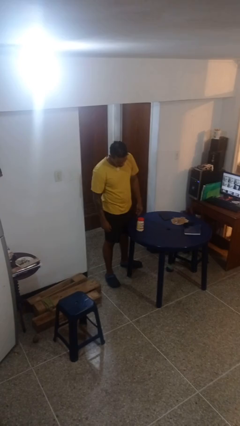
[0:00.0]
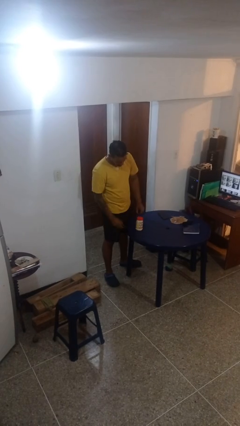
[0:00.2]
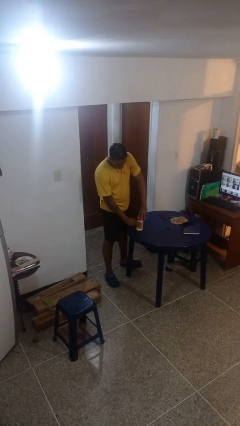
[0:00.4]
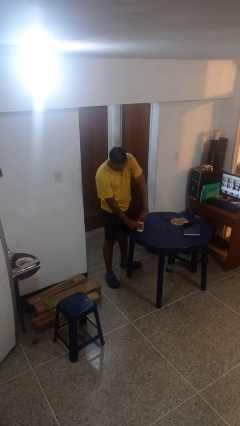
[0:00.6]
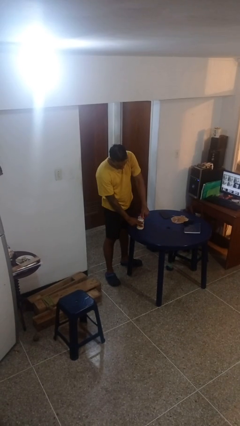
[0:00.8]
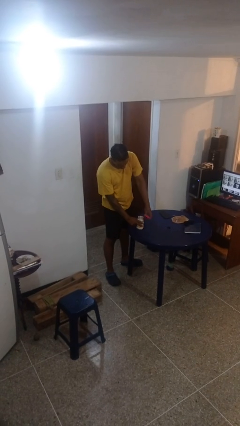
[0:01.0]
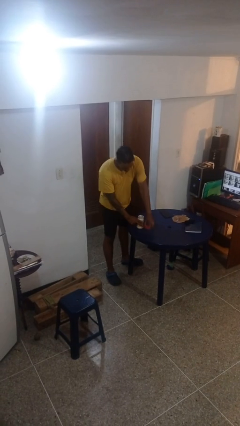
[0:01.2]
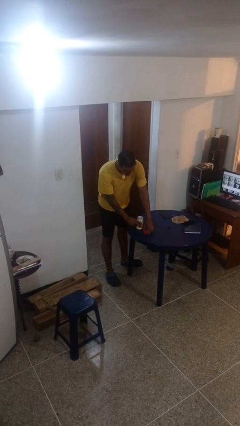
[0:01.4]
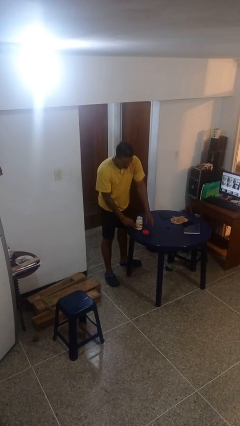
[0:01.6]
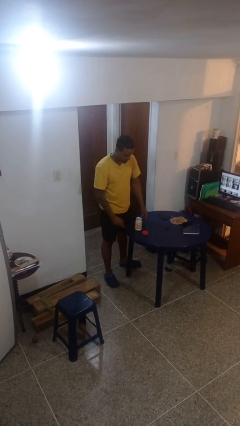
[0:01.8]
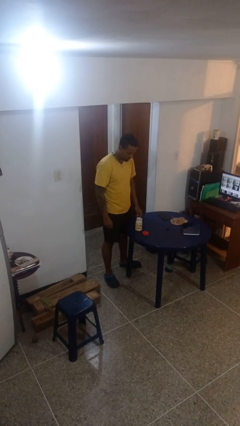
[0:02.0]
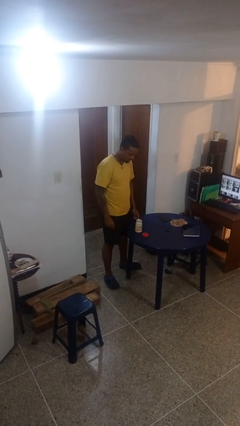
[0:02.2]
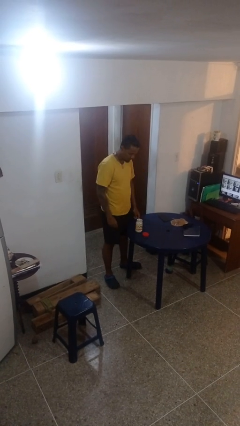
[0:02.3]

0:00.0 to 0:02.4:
person opens jar

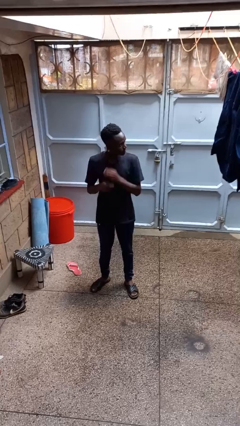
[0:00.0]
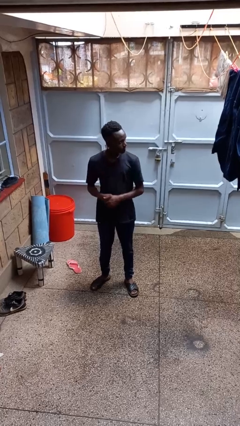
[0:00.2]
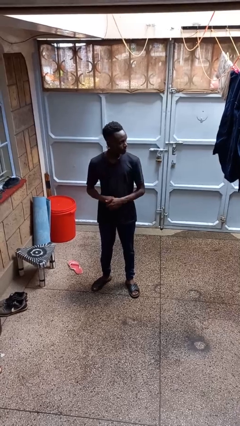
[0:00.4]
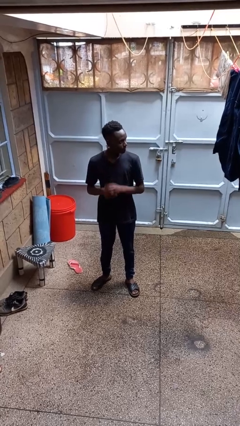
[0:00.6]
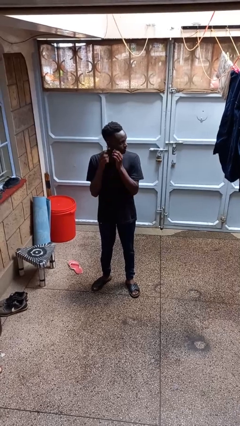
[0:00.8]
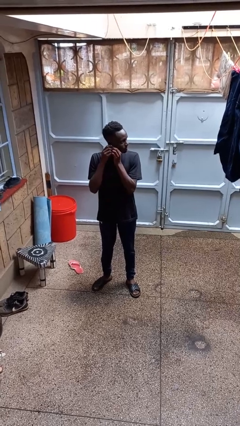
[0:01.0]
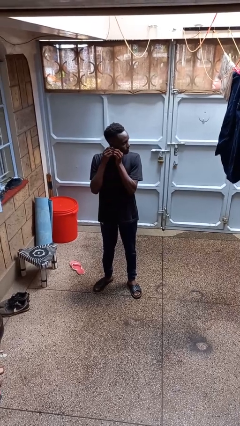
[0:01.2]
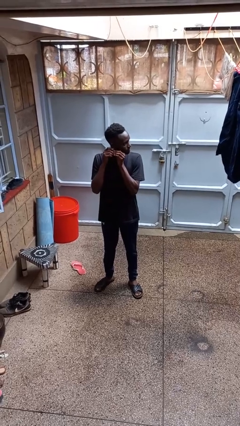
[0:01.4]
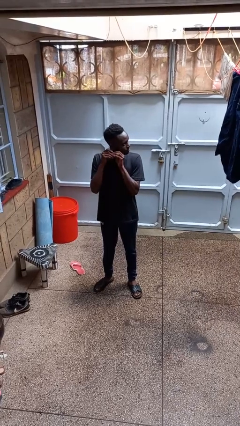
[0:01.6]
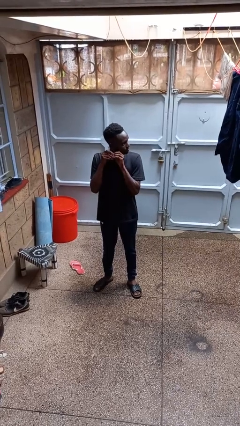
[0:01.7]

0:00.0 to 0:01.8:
person takes off earrings

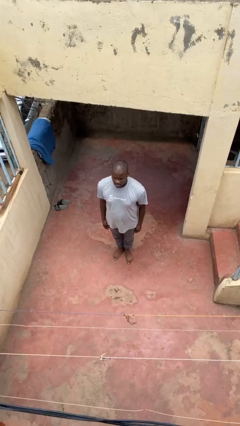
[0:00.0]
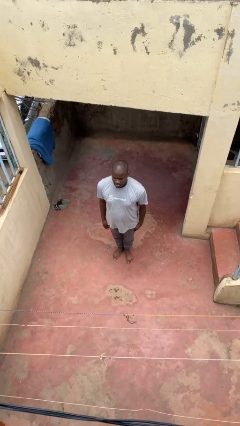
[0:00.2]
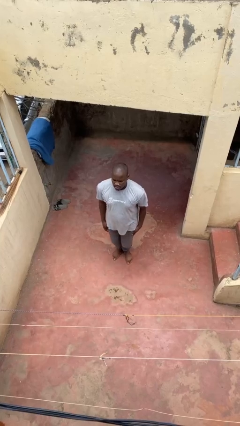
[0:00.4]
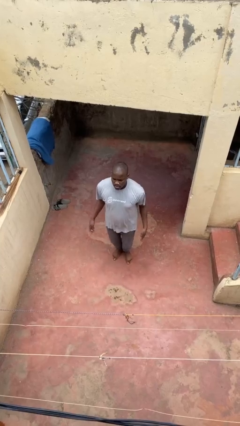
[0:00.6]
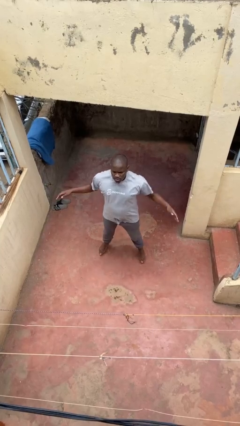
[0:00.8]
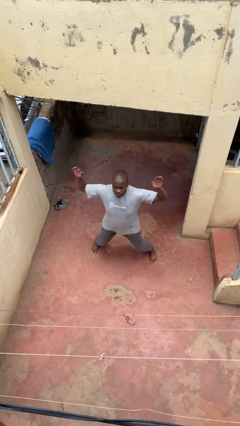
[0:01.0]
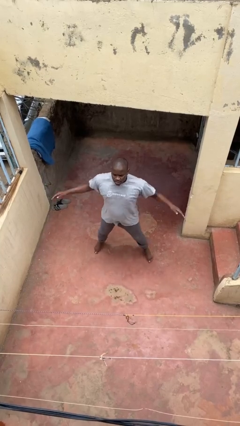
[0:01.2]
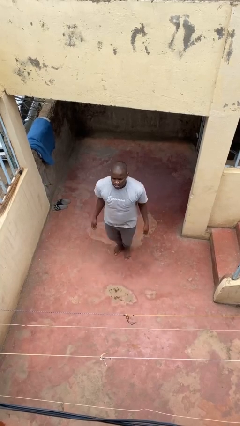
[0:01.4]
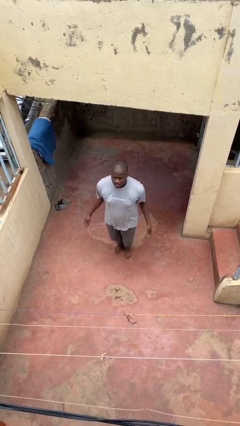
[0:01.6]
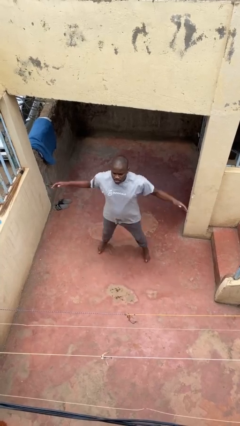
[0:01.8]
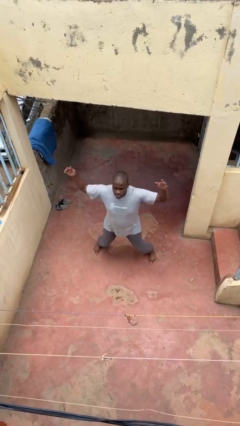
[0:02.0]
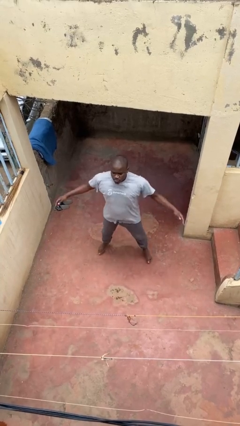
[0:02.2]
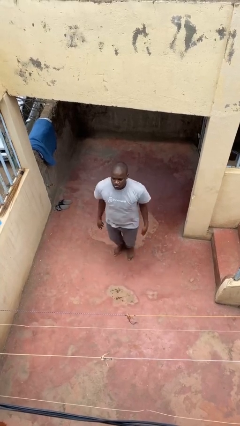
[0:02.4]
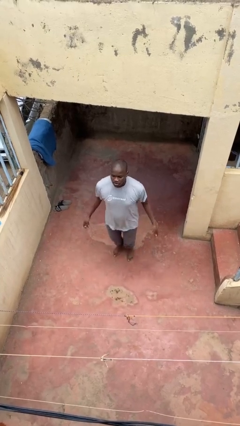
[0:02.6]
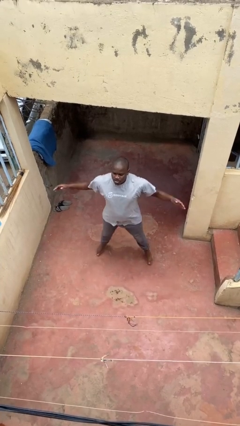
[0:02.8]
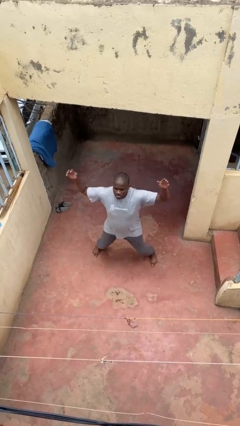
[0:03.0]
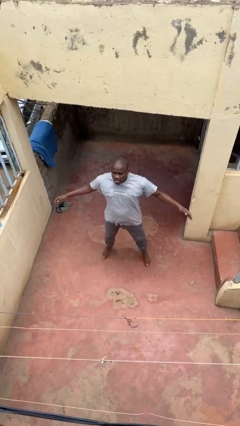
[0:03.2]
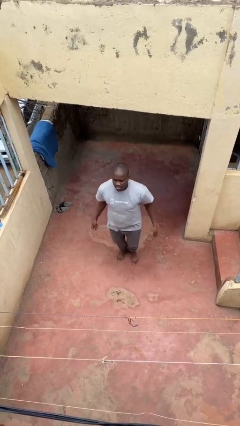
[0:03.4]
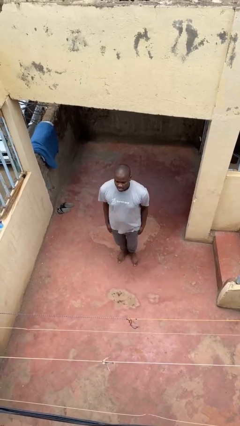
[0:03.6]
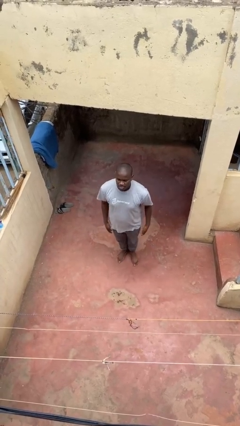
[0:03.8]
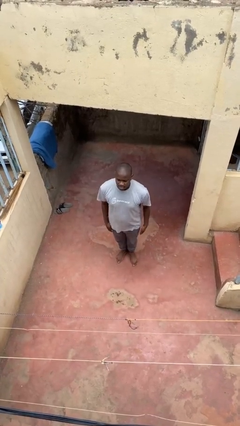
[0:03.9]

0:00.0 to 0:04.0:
person exercises with jumping jacks

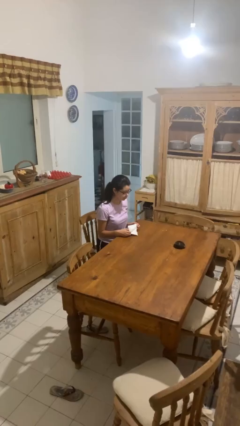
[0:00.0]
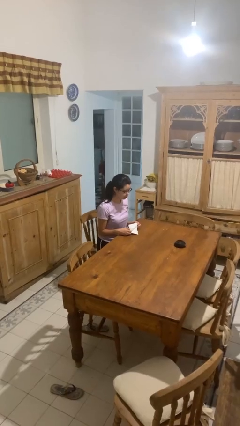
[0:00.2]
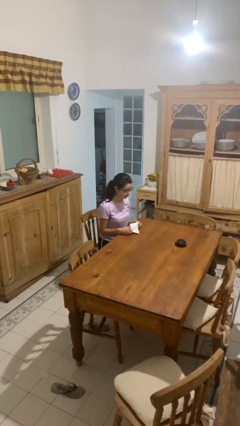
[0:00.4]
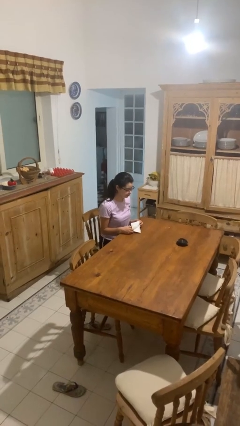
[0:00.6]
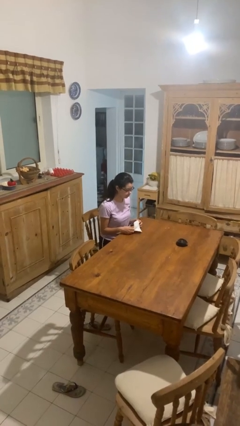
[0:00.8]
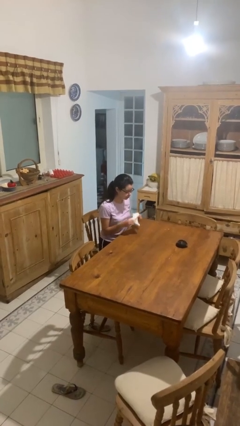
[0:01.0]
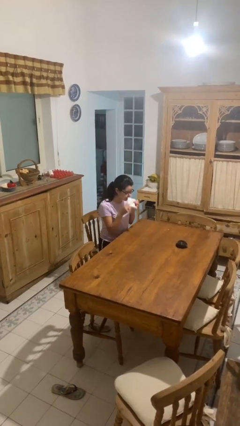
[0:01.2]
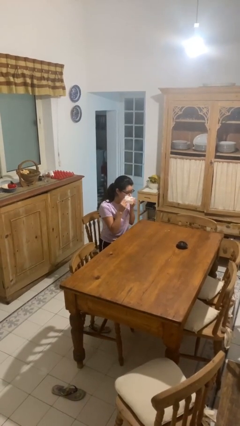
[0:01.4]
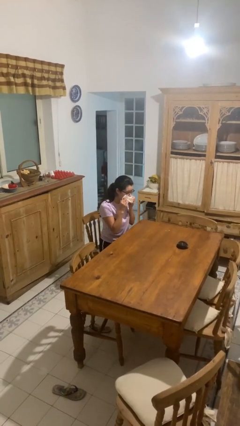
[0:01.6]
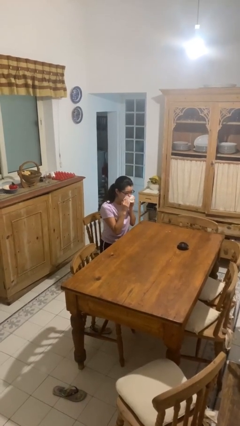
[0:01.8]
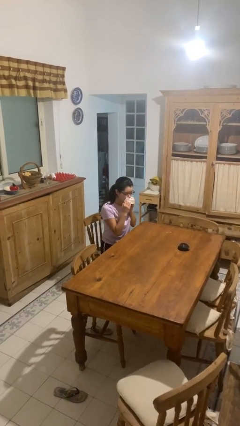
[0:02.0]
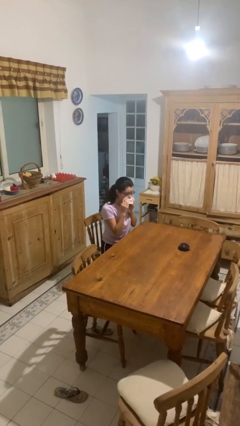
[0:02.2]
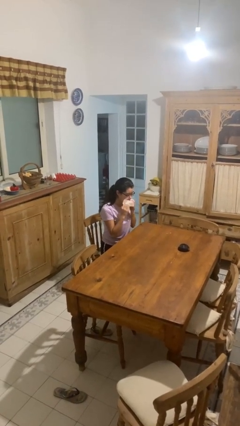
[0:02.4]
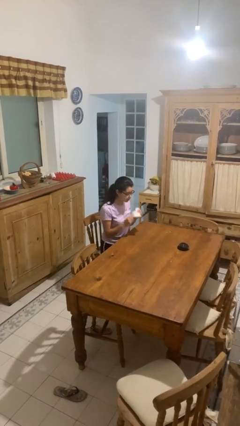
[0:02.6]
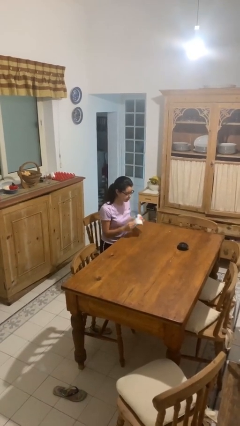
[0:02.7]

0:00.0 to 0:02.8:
person wipes mouth with napkin

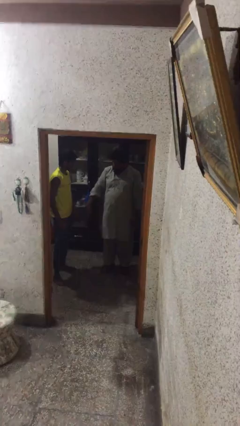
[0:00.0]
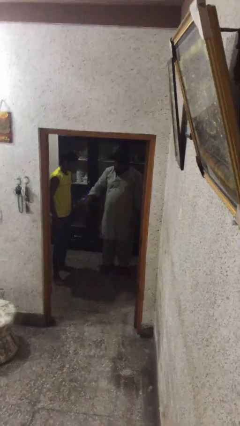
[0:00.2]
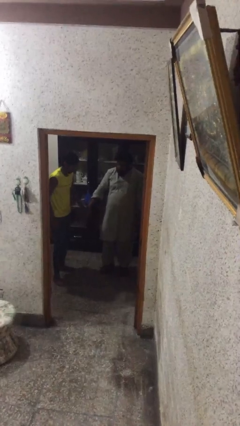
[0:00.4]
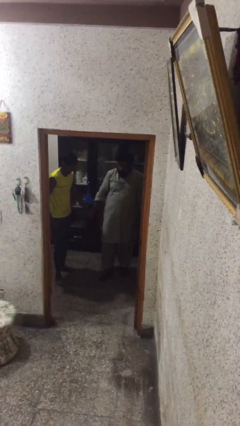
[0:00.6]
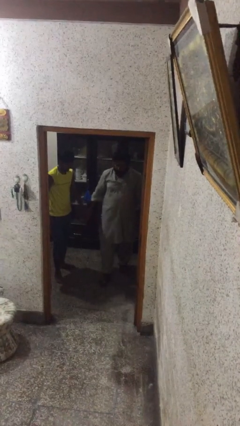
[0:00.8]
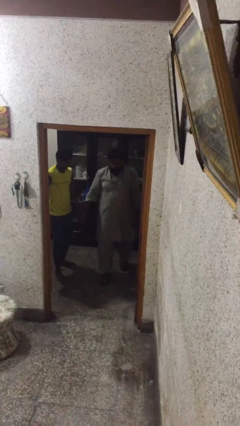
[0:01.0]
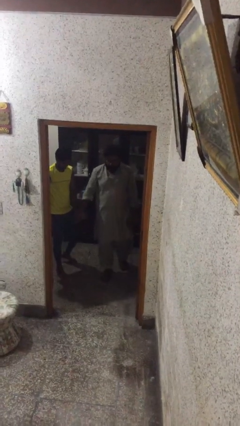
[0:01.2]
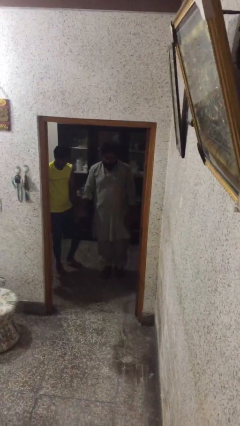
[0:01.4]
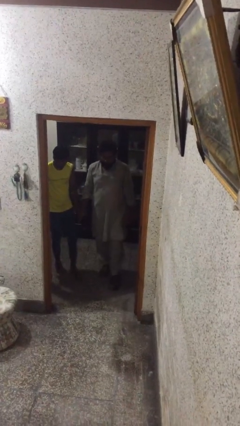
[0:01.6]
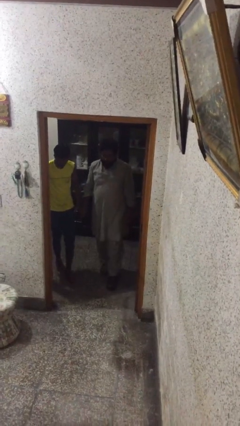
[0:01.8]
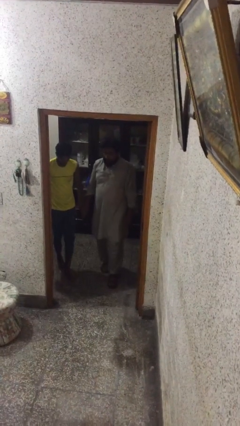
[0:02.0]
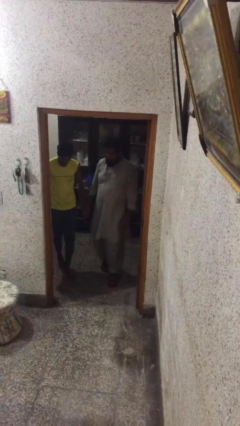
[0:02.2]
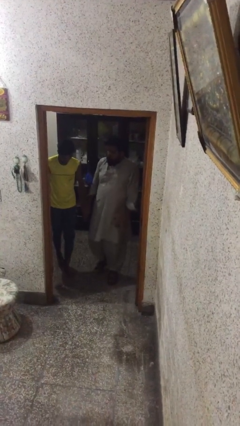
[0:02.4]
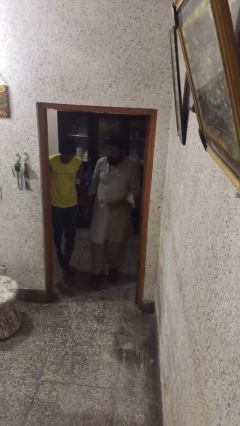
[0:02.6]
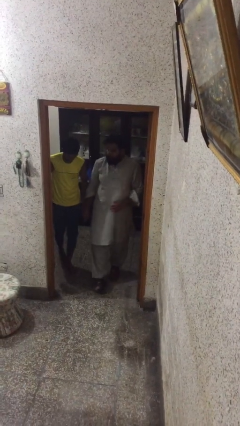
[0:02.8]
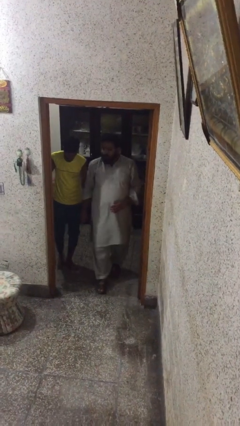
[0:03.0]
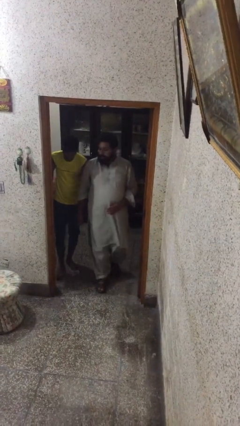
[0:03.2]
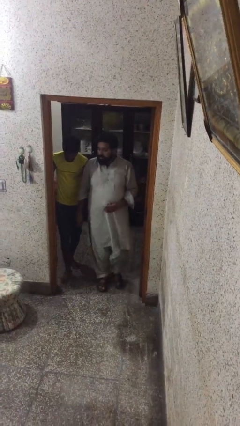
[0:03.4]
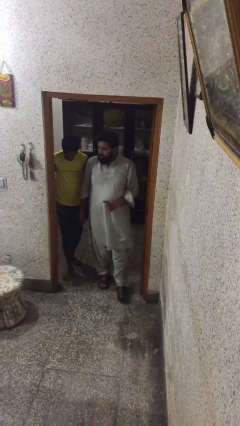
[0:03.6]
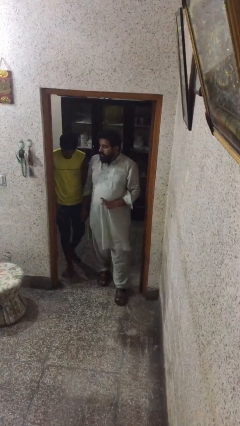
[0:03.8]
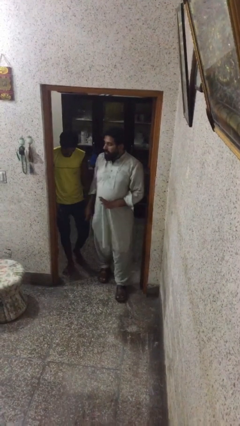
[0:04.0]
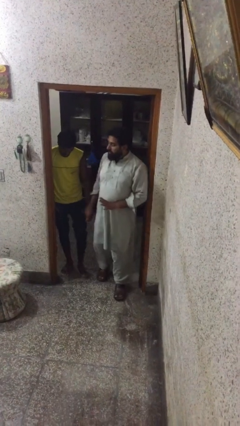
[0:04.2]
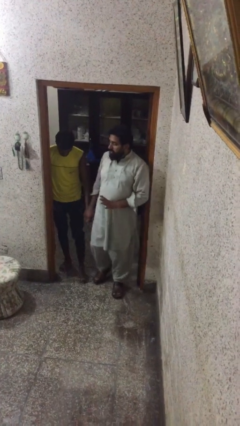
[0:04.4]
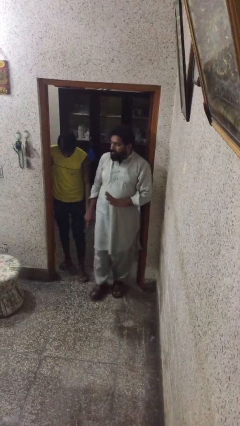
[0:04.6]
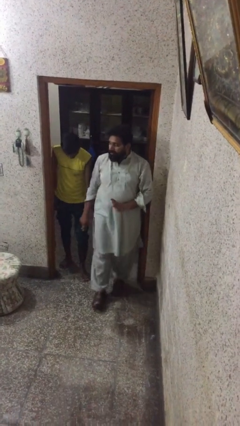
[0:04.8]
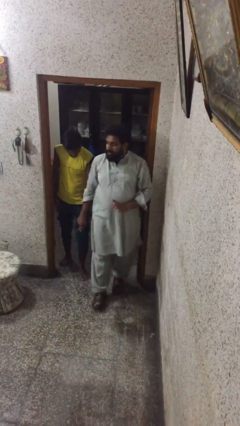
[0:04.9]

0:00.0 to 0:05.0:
person holds hand

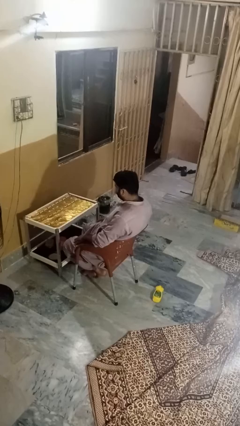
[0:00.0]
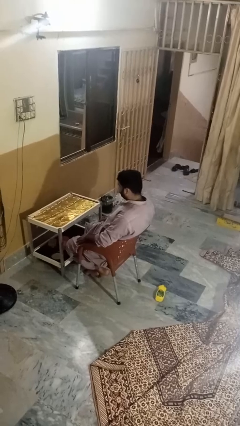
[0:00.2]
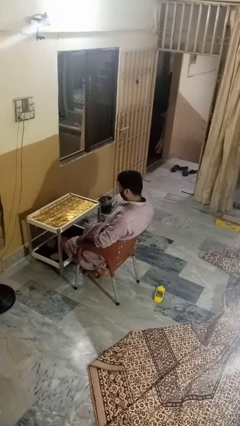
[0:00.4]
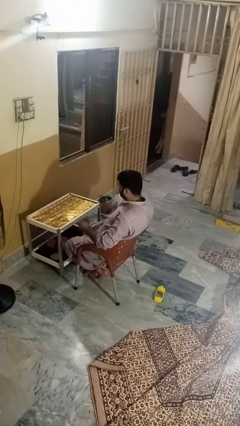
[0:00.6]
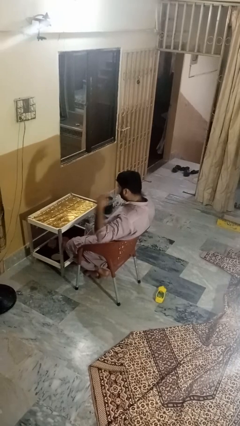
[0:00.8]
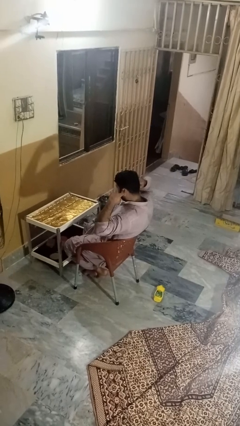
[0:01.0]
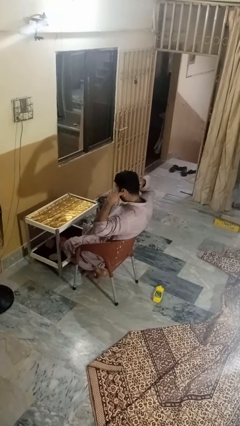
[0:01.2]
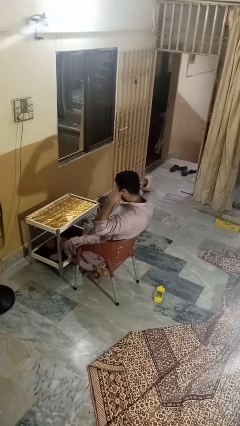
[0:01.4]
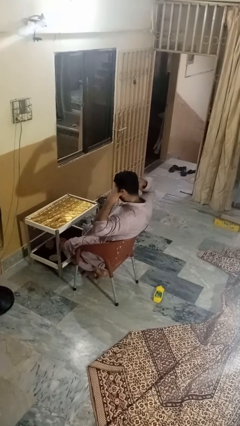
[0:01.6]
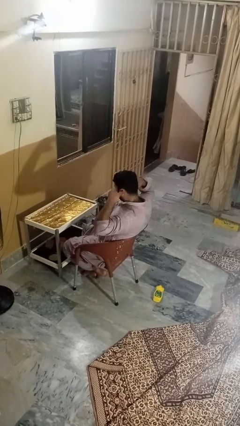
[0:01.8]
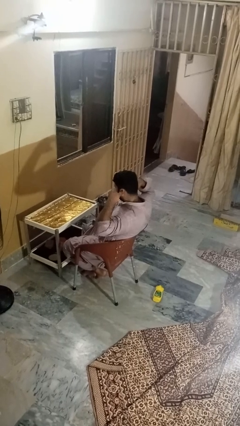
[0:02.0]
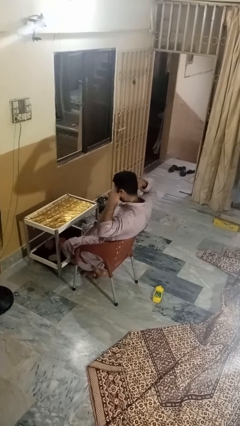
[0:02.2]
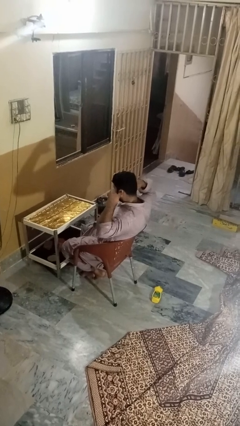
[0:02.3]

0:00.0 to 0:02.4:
person puts fingers in ear
